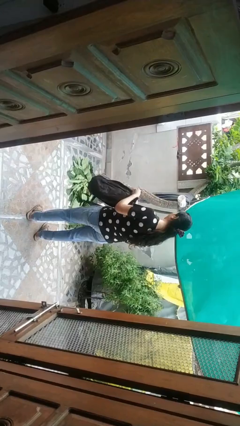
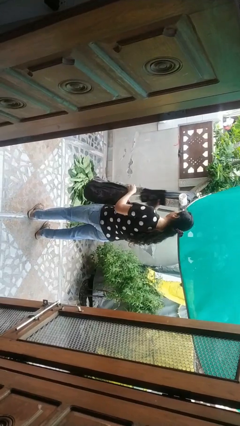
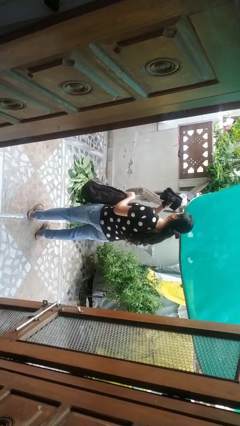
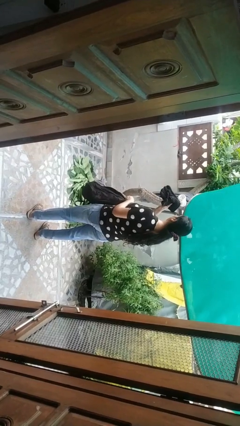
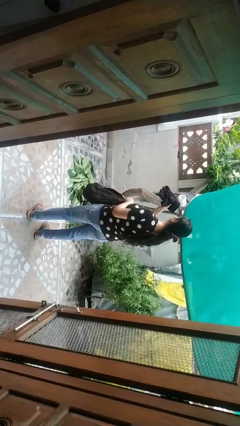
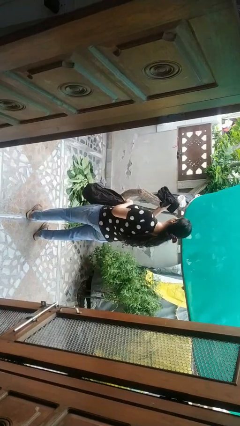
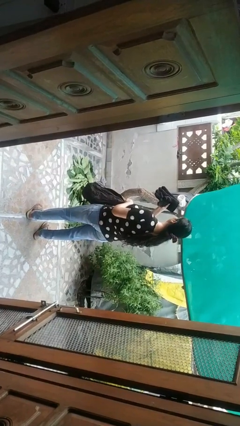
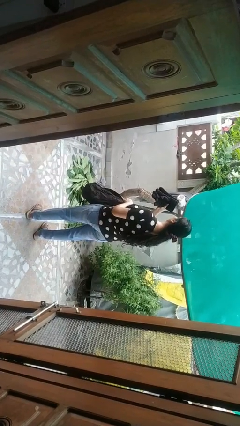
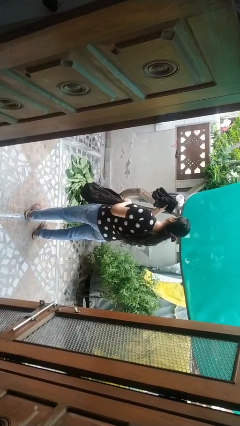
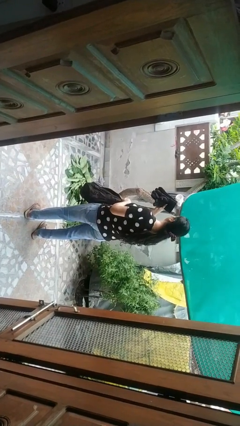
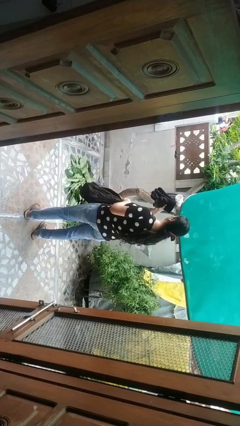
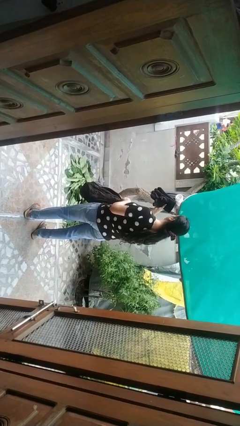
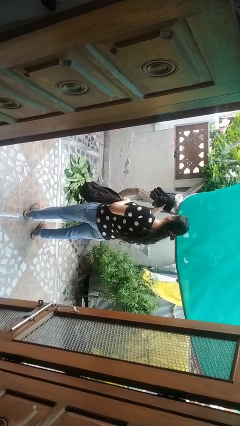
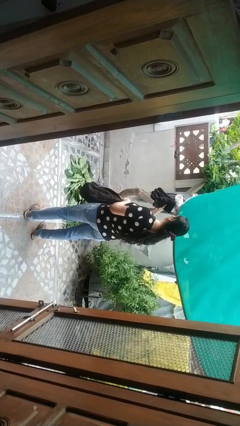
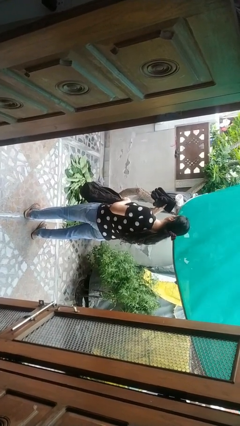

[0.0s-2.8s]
person takes object from backpack

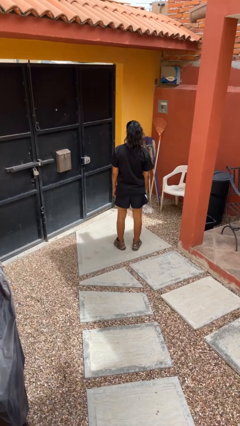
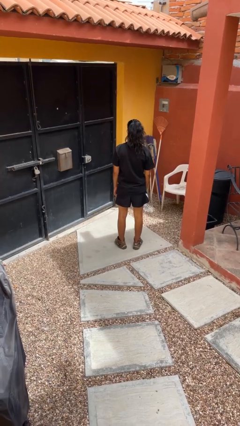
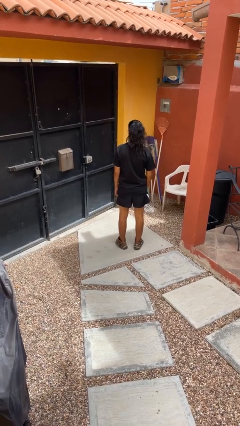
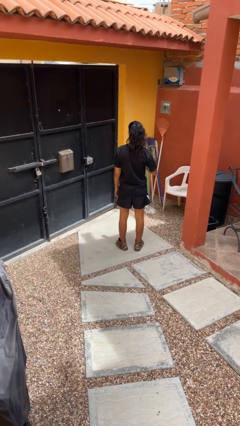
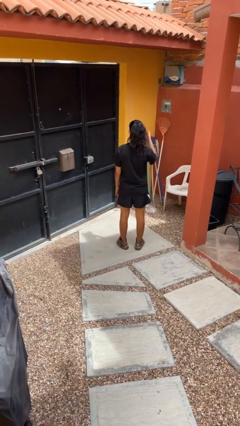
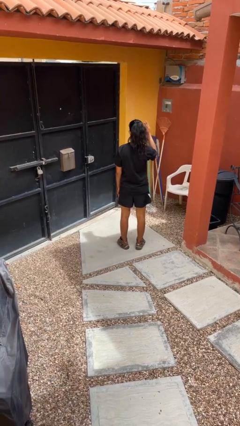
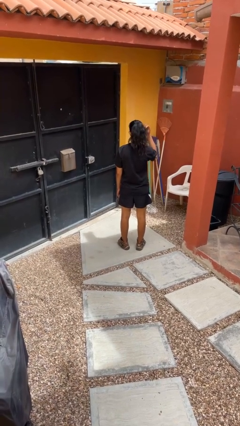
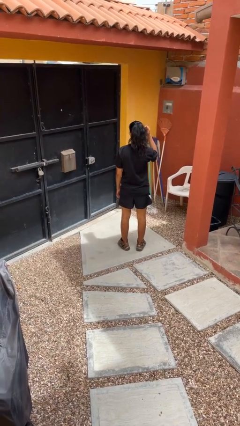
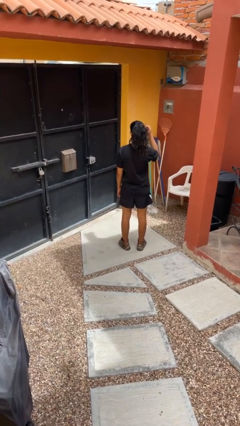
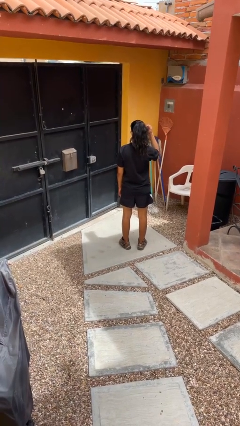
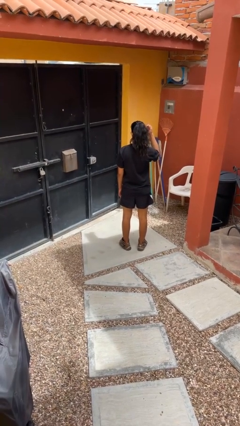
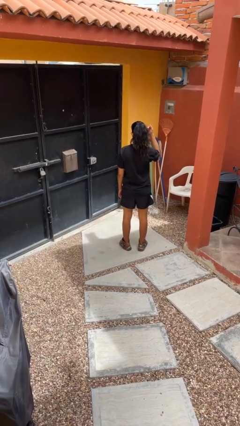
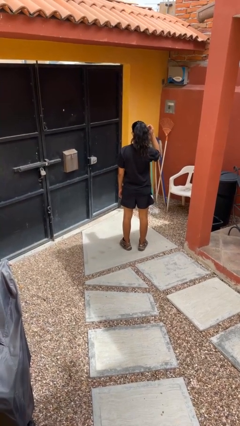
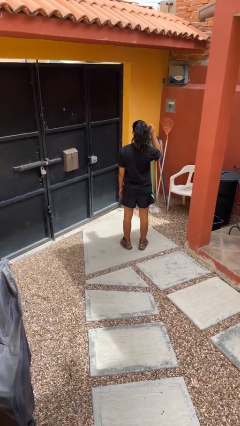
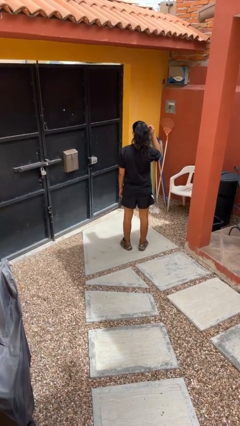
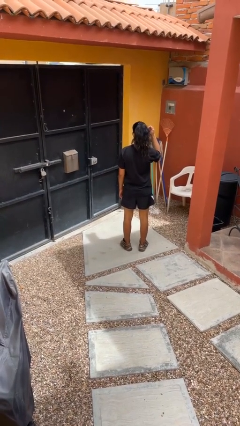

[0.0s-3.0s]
person gestures come here

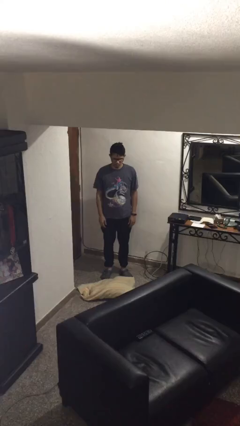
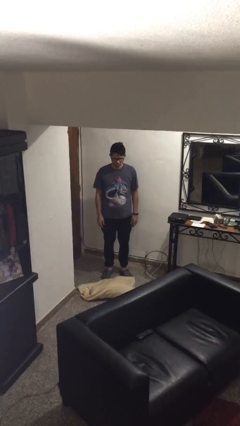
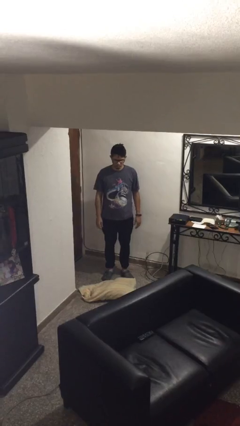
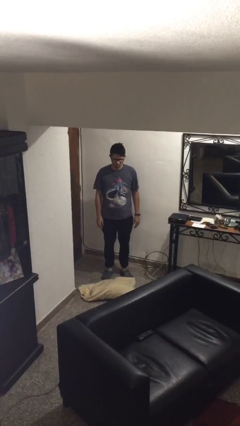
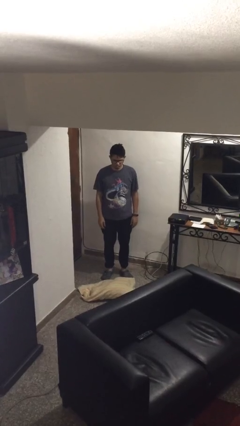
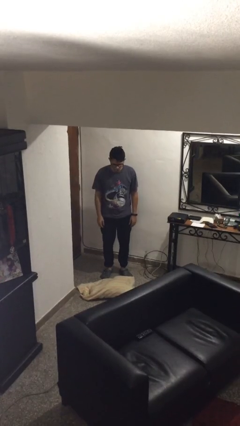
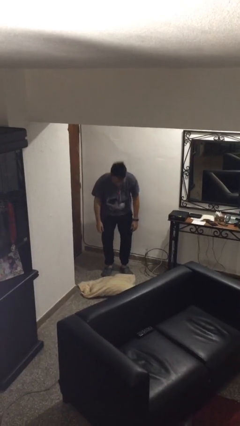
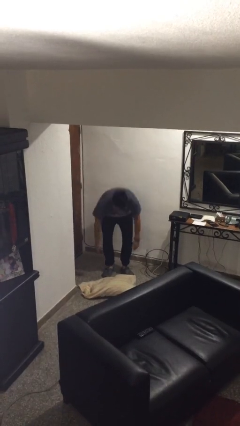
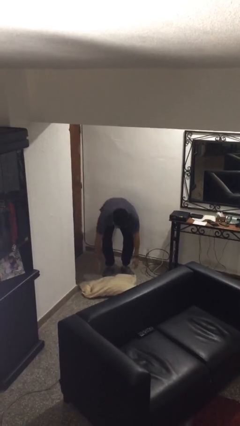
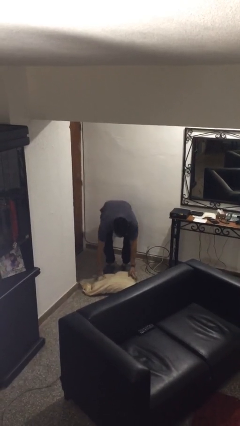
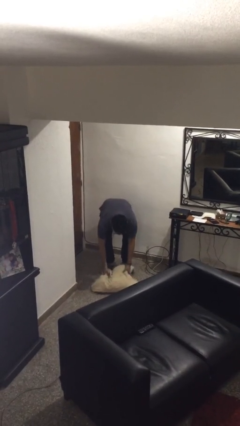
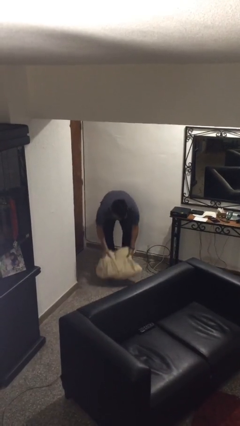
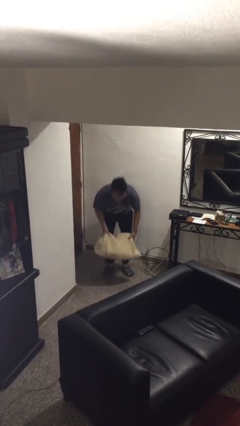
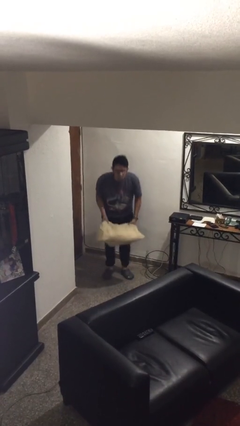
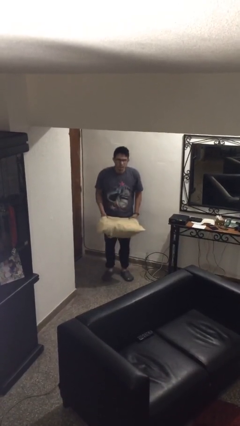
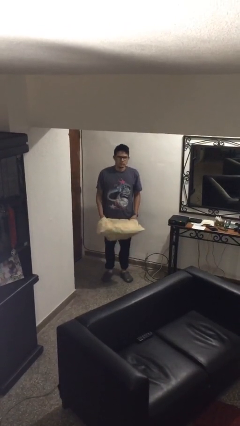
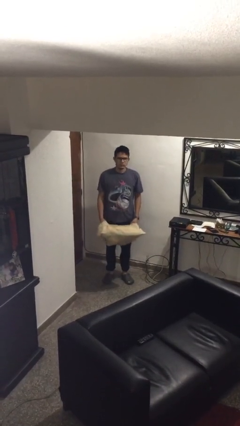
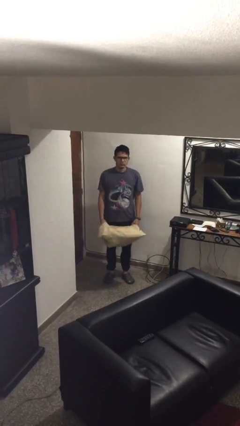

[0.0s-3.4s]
person picks up object from floor

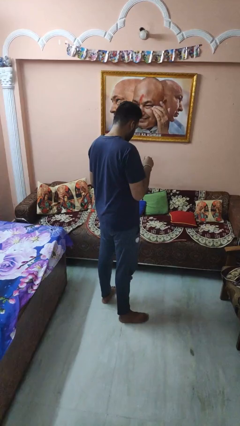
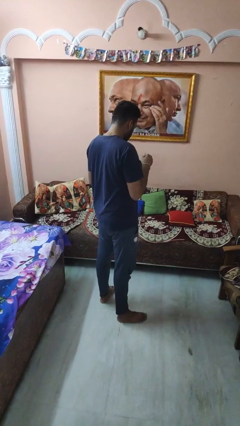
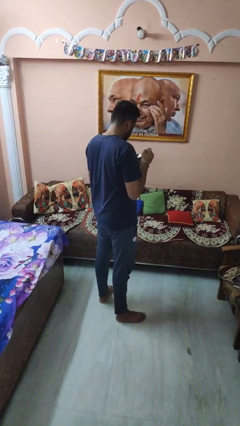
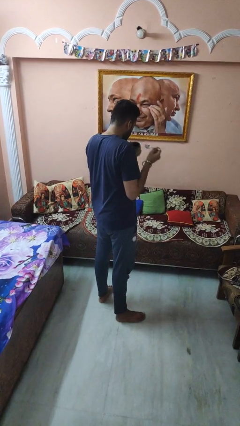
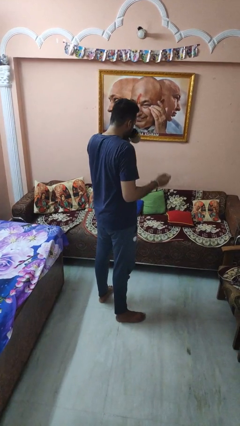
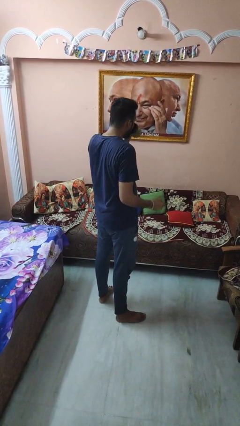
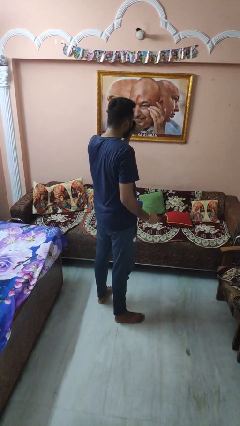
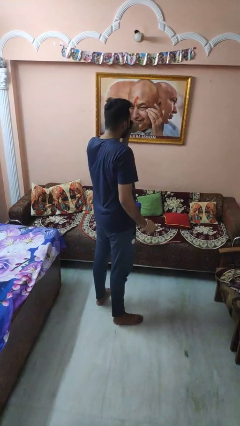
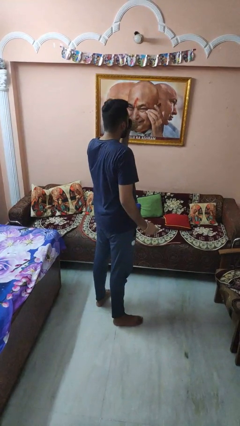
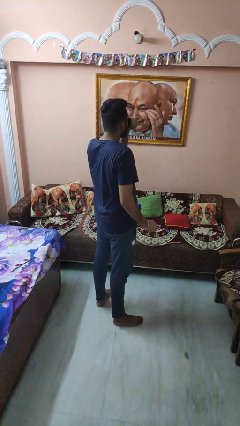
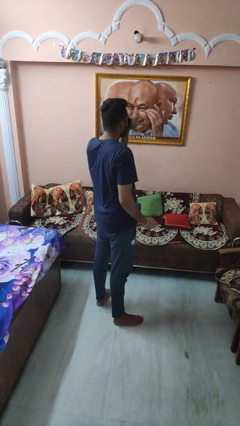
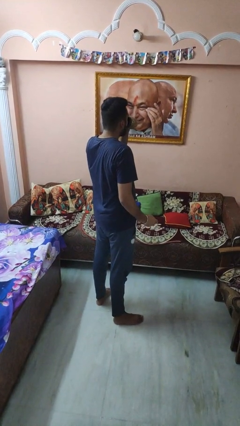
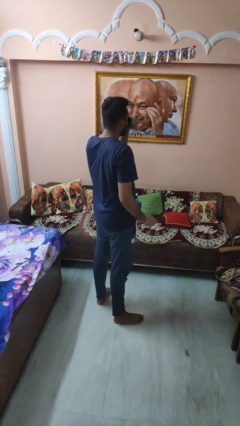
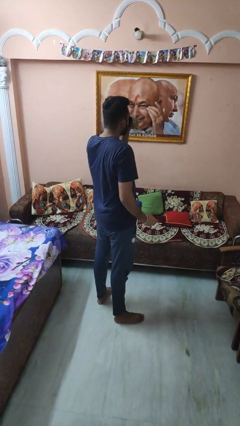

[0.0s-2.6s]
person drinks from mug

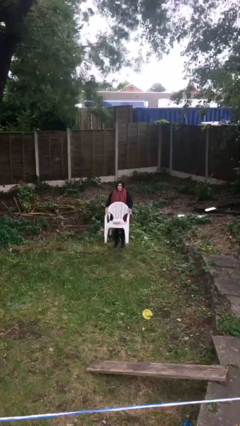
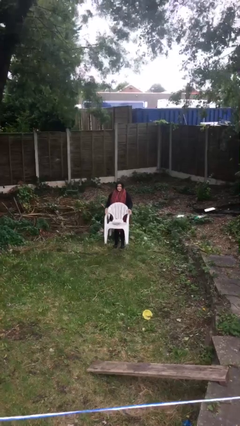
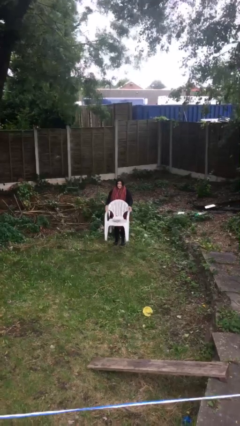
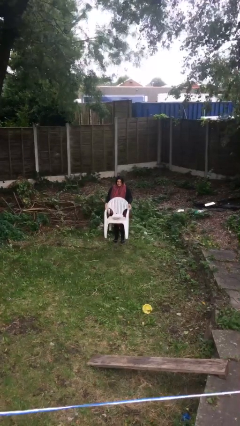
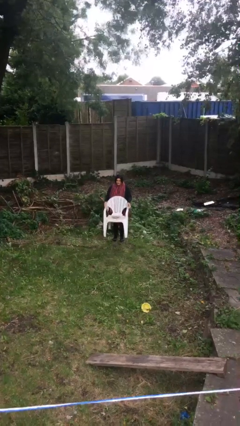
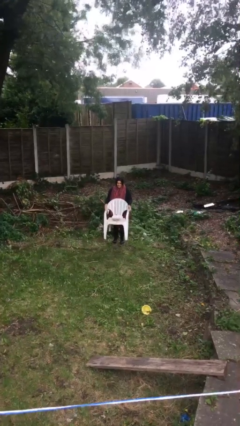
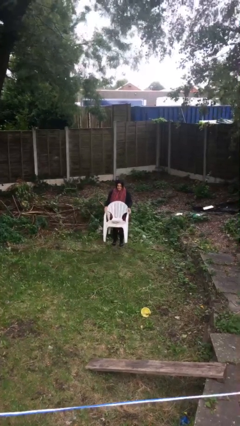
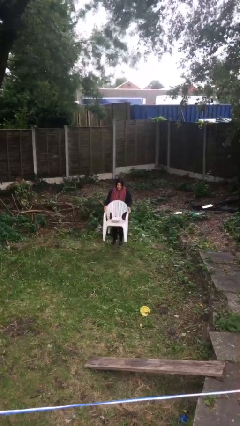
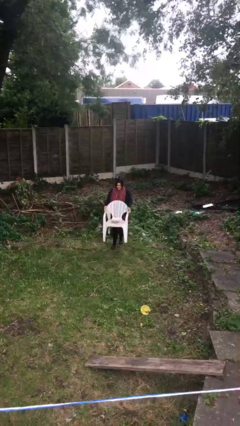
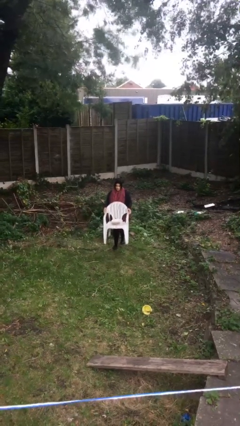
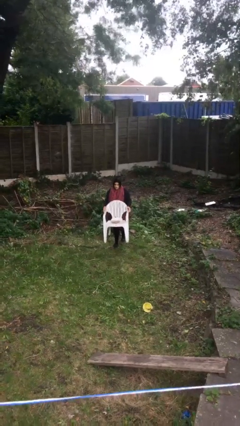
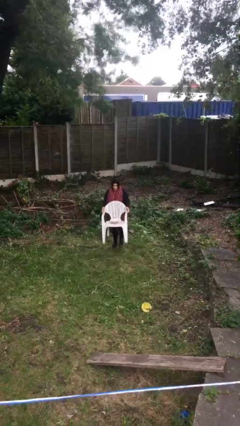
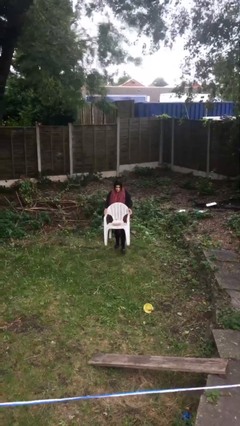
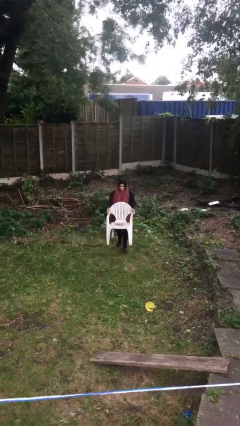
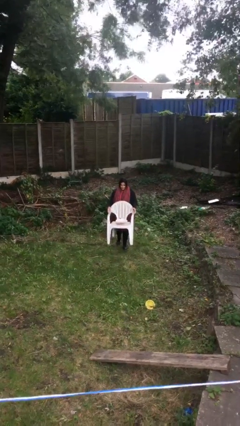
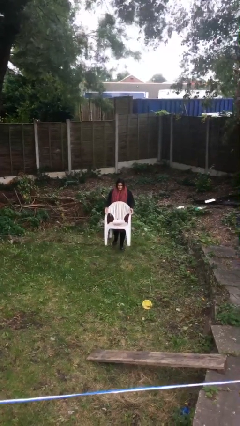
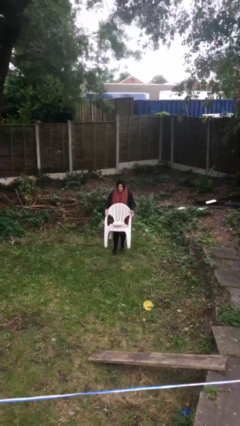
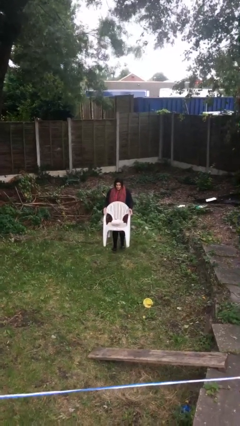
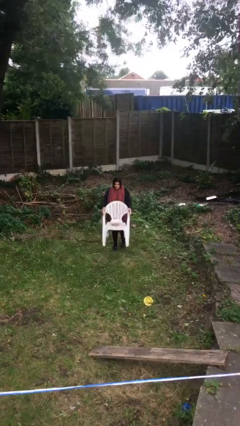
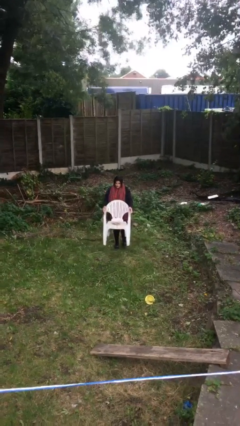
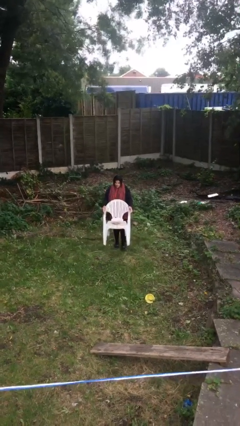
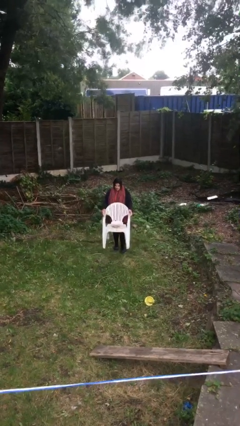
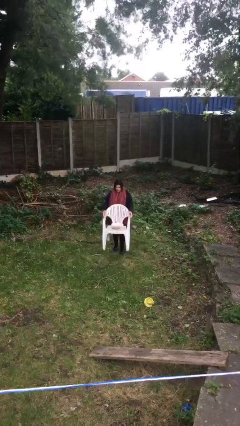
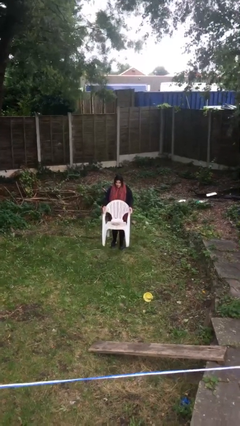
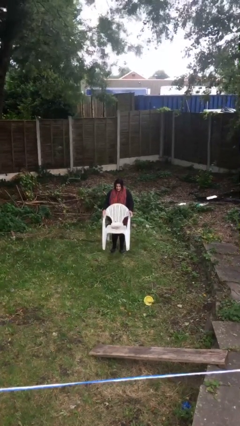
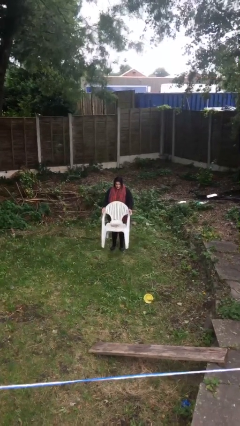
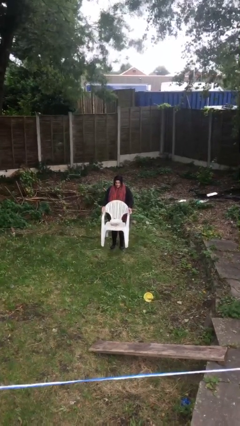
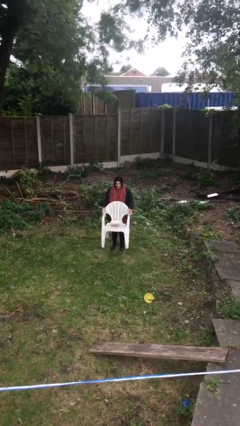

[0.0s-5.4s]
person carries heavy object

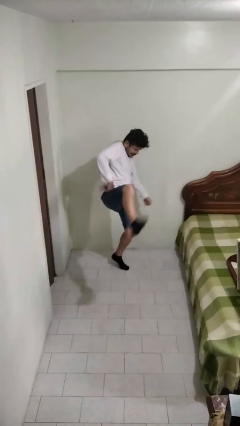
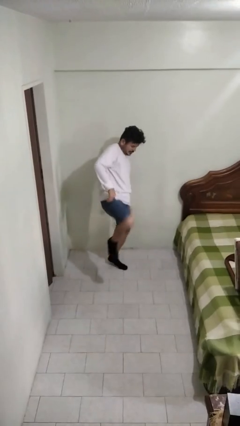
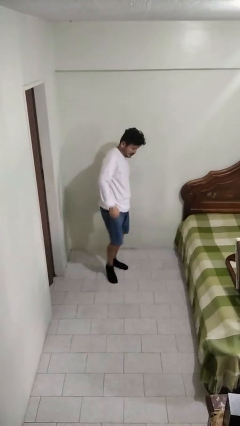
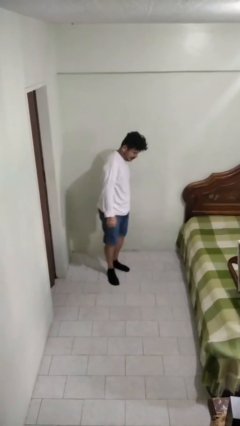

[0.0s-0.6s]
person karate kicks
